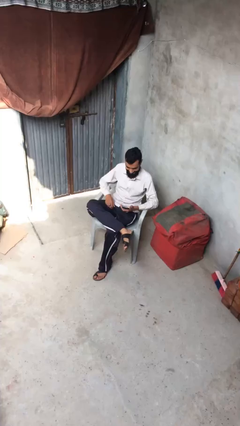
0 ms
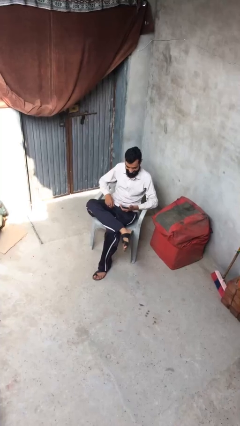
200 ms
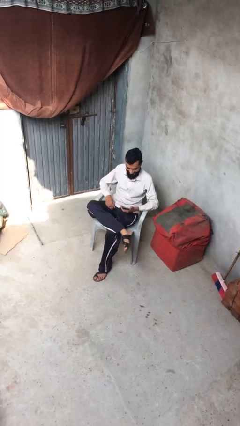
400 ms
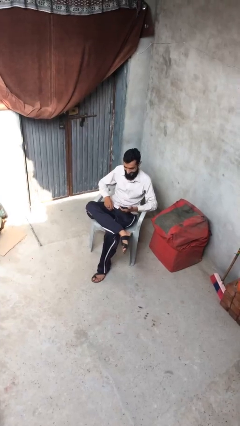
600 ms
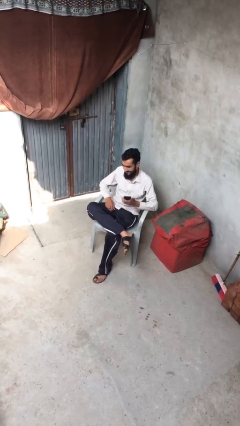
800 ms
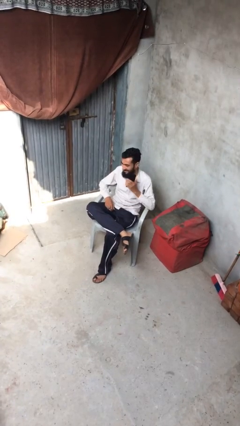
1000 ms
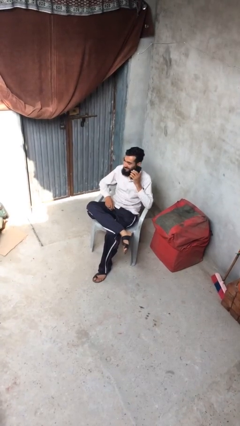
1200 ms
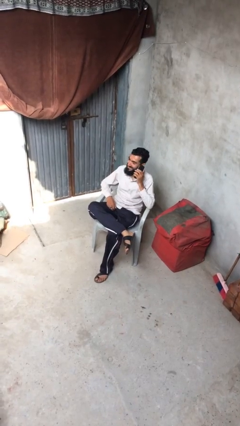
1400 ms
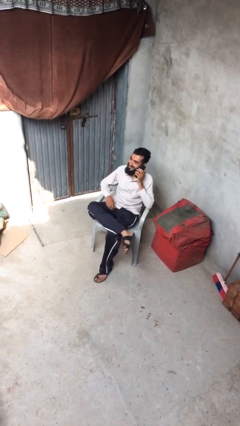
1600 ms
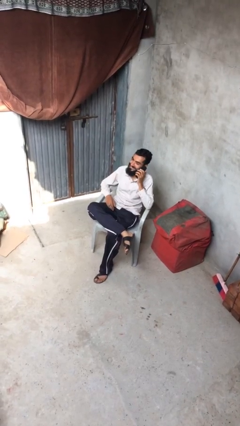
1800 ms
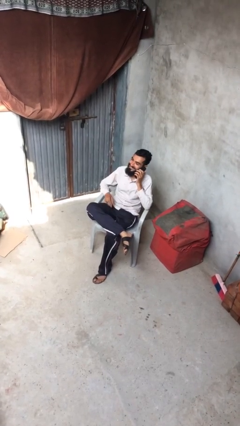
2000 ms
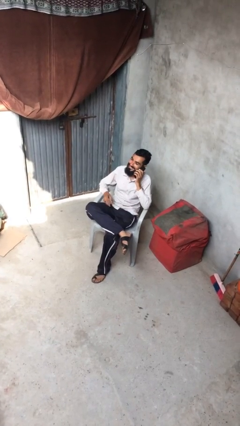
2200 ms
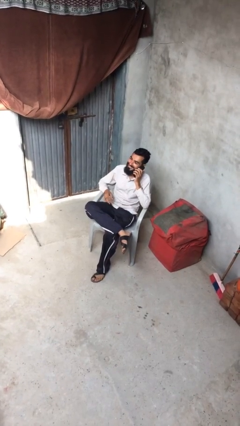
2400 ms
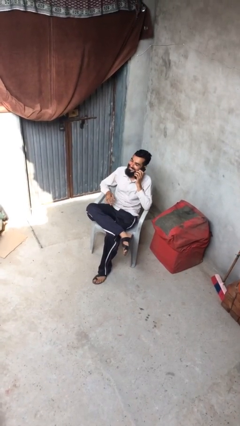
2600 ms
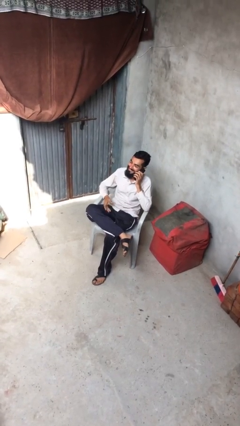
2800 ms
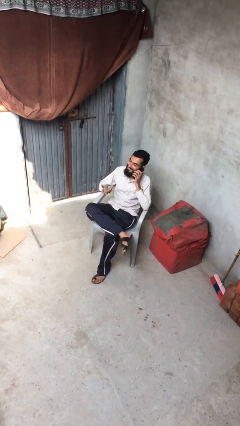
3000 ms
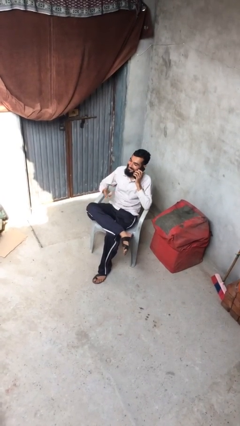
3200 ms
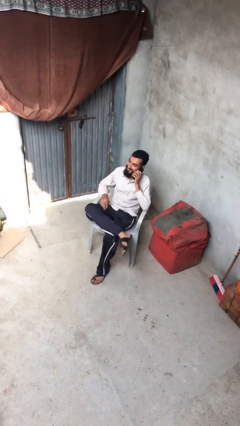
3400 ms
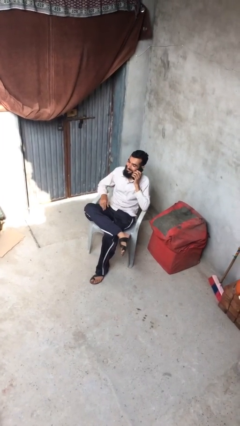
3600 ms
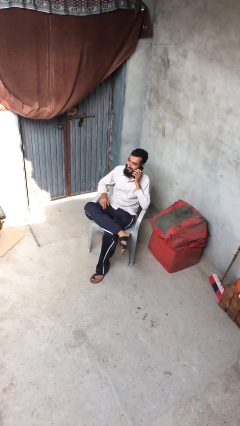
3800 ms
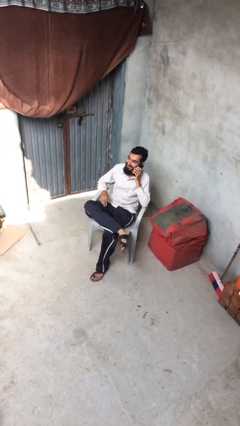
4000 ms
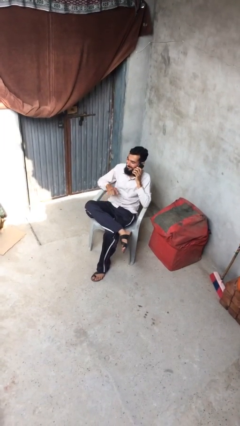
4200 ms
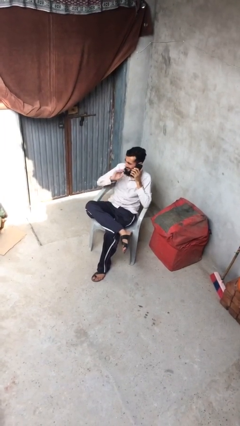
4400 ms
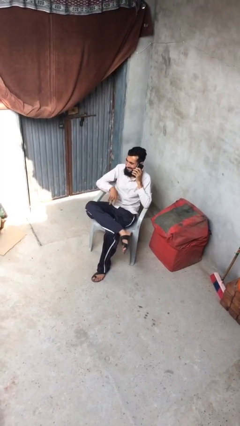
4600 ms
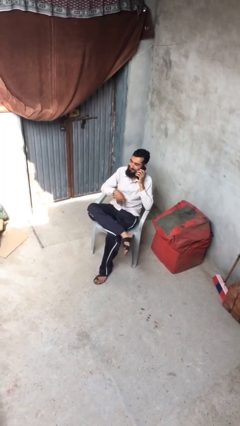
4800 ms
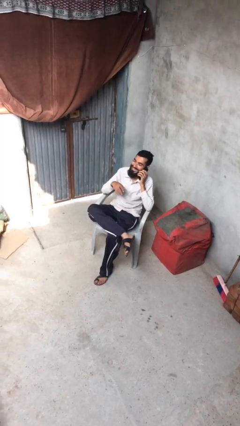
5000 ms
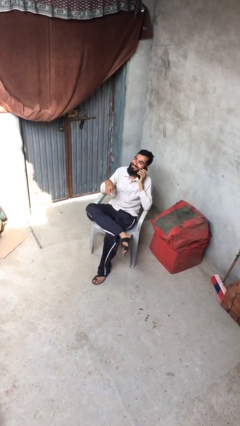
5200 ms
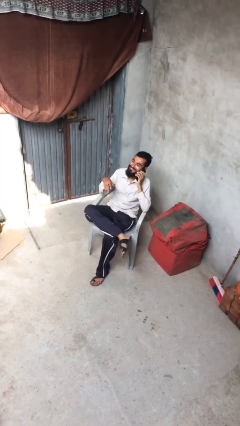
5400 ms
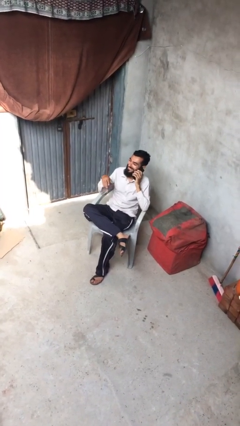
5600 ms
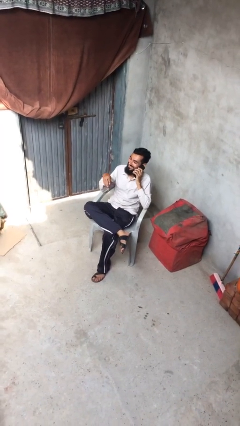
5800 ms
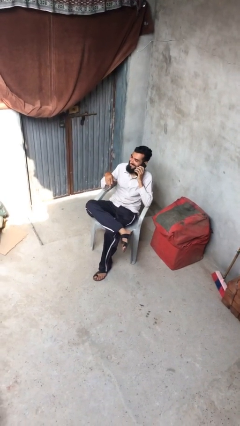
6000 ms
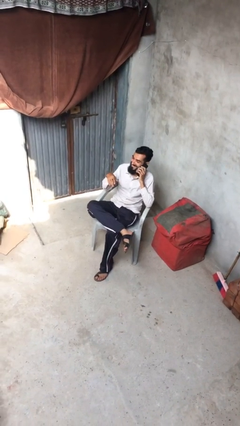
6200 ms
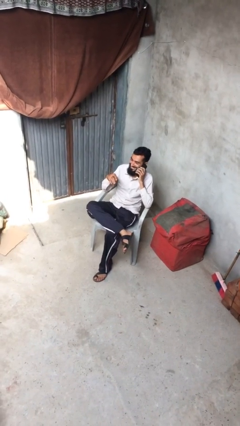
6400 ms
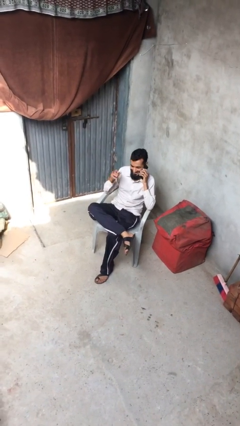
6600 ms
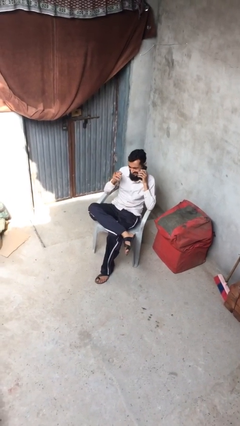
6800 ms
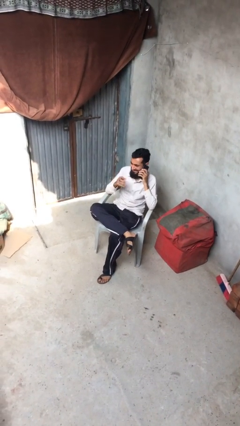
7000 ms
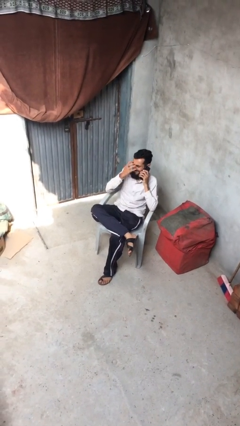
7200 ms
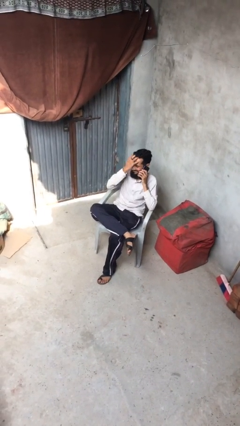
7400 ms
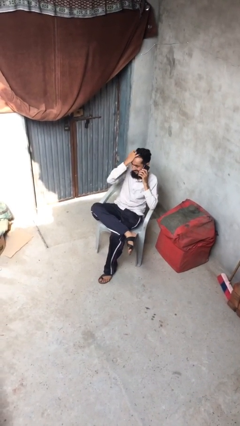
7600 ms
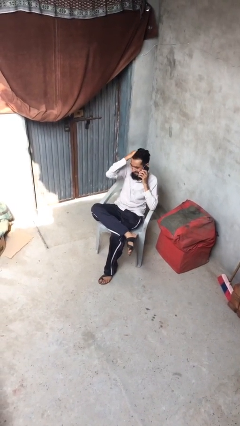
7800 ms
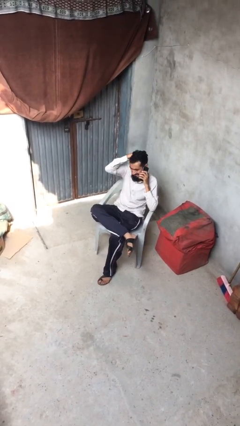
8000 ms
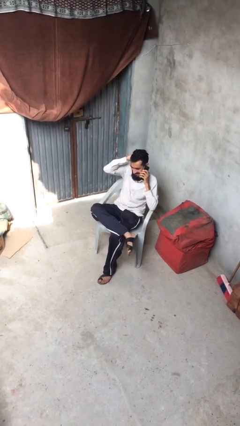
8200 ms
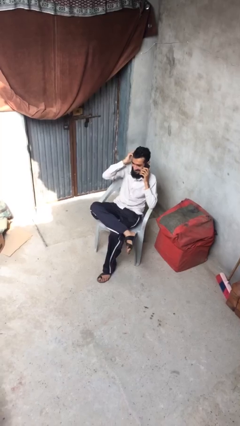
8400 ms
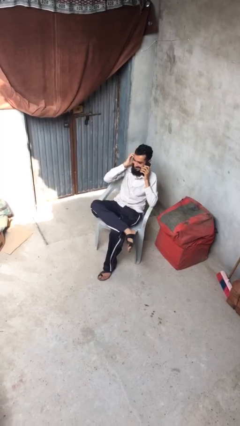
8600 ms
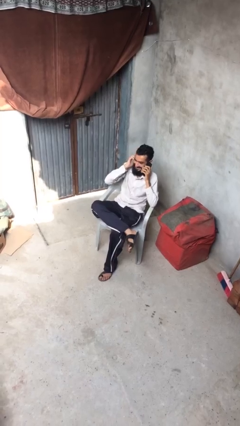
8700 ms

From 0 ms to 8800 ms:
person talks on phone

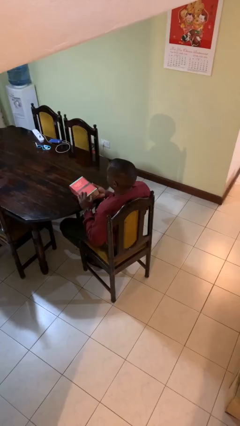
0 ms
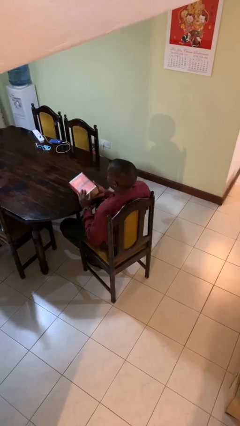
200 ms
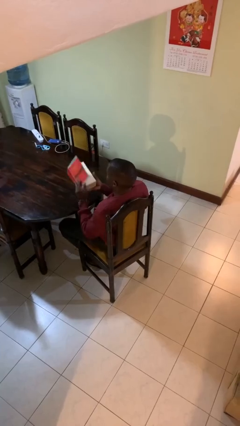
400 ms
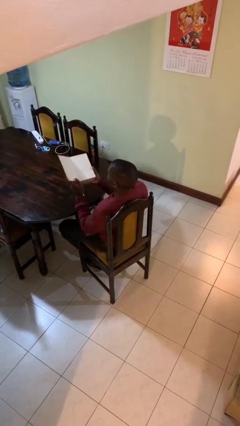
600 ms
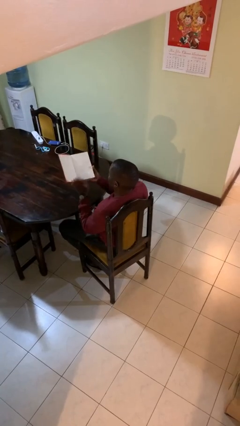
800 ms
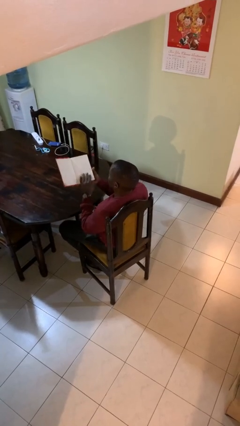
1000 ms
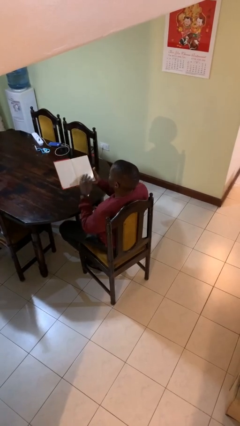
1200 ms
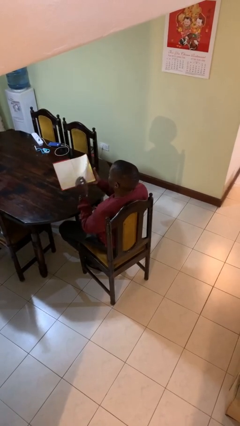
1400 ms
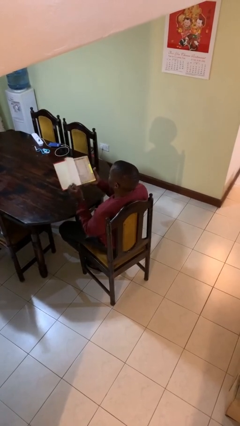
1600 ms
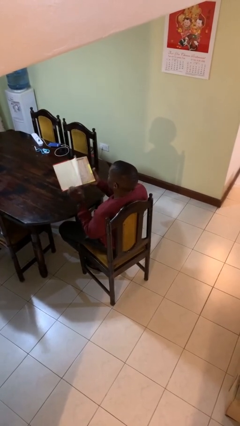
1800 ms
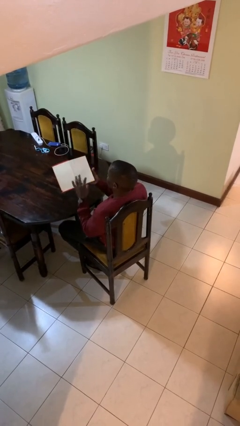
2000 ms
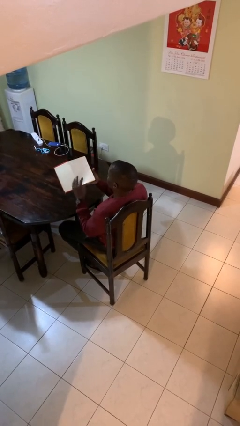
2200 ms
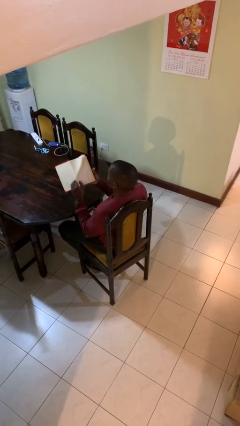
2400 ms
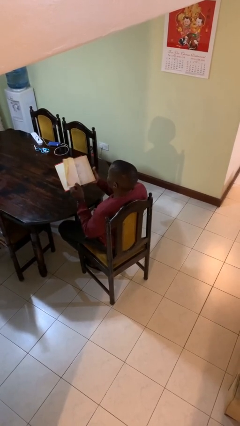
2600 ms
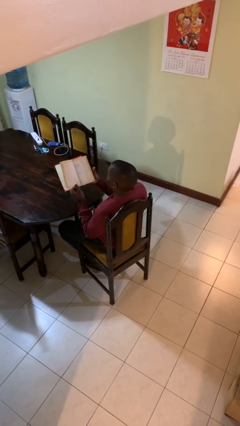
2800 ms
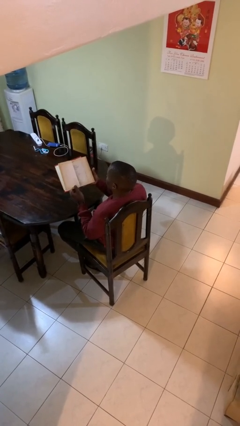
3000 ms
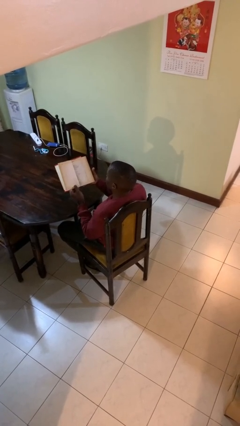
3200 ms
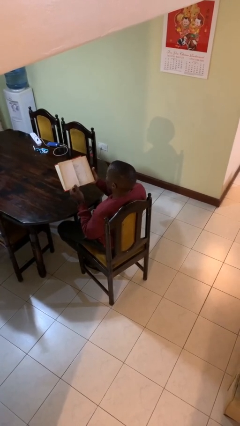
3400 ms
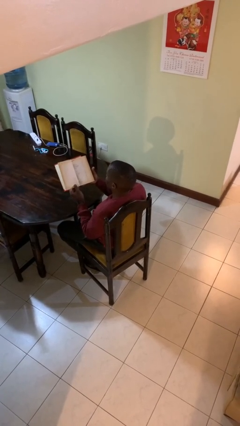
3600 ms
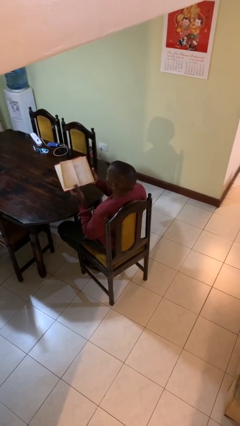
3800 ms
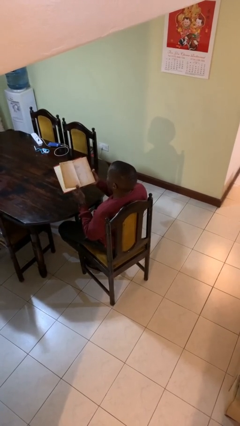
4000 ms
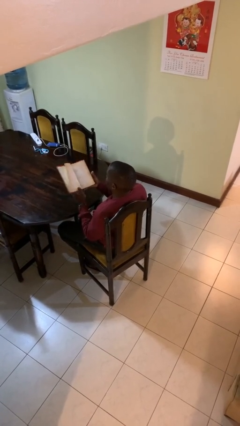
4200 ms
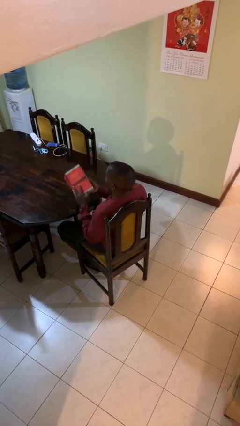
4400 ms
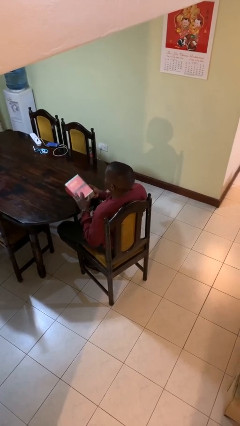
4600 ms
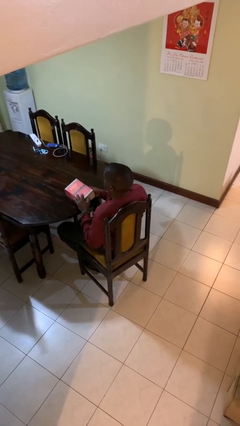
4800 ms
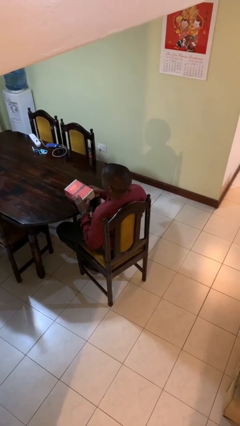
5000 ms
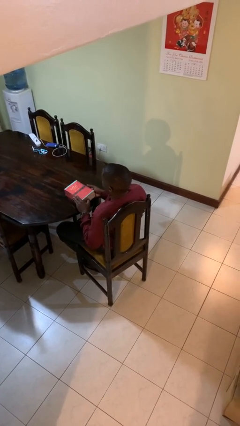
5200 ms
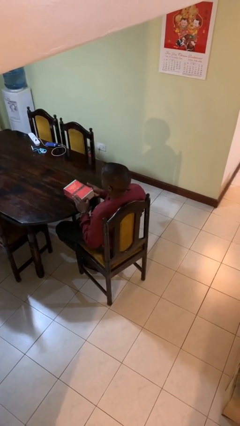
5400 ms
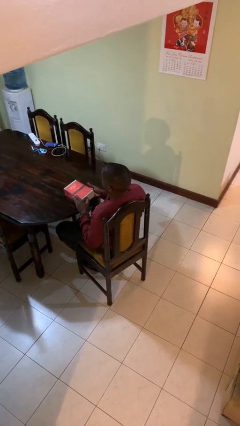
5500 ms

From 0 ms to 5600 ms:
person reads book

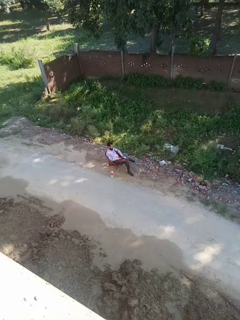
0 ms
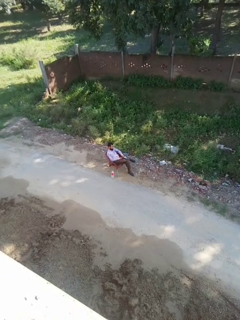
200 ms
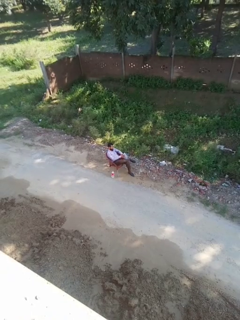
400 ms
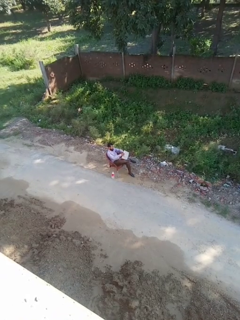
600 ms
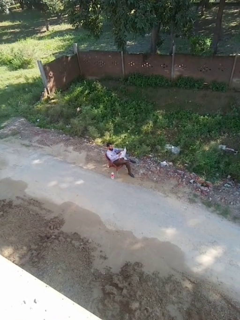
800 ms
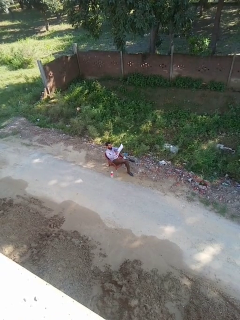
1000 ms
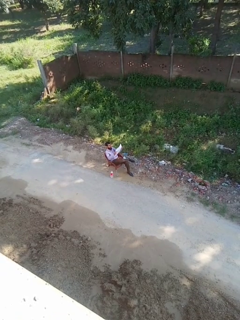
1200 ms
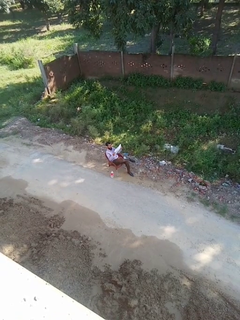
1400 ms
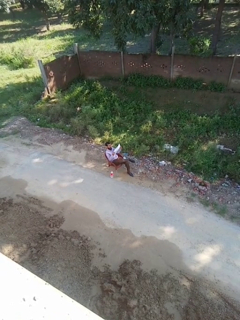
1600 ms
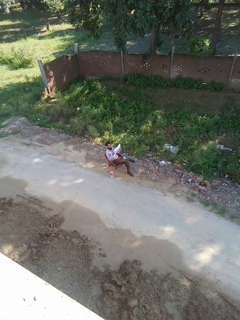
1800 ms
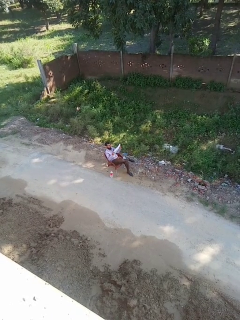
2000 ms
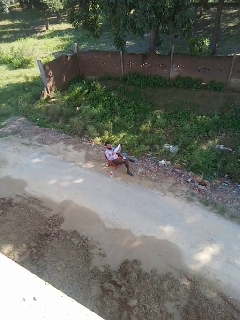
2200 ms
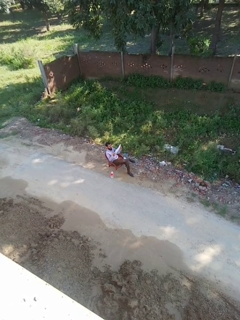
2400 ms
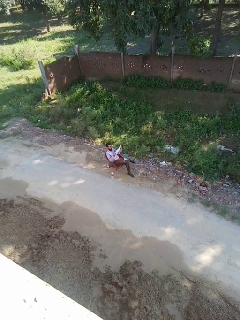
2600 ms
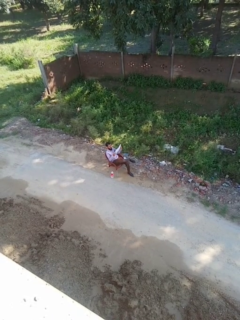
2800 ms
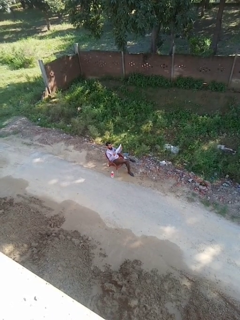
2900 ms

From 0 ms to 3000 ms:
person reads newspaper

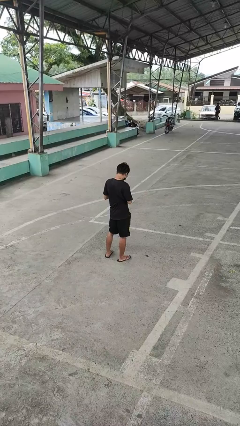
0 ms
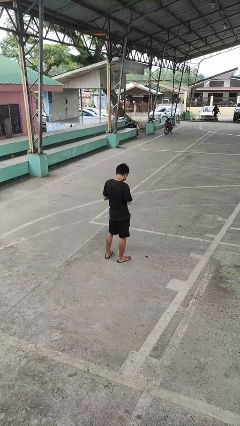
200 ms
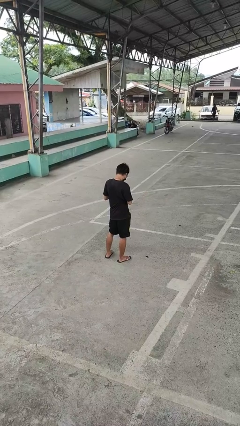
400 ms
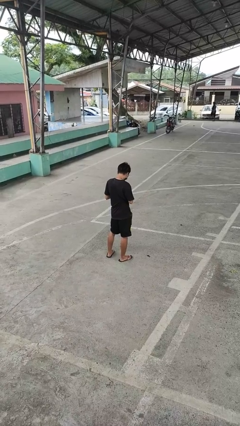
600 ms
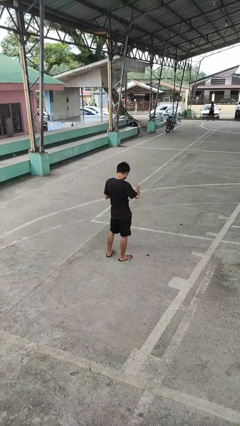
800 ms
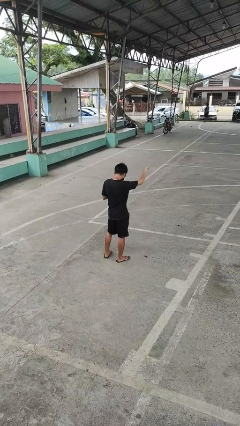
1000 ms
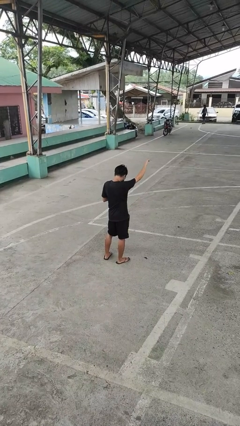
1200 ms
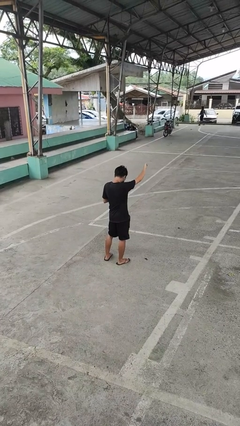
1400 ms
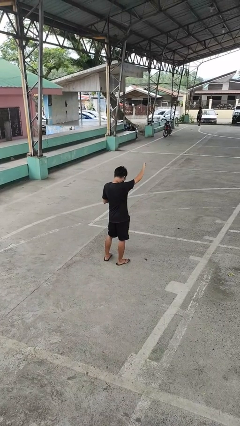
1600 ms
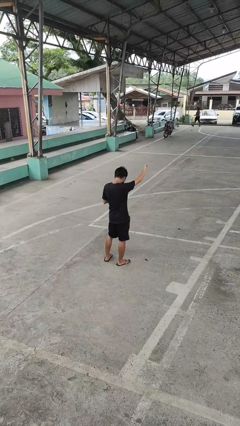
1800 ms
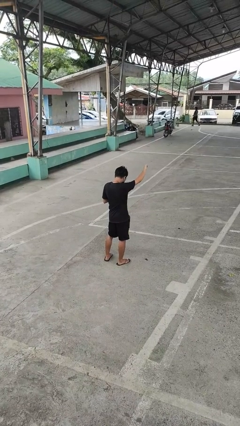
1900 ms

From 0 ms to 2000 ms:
person gestures thumbs down
